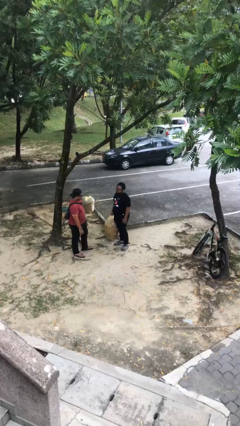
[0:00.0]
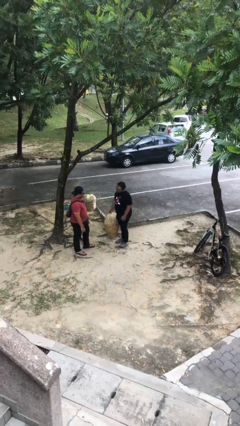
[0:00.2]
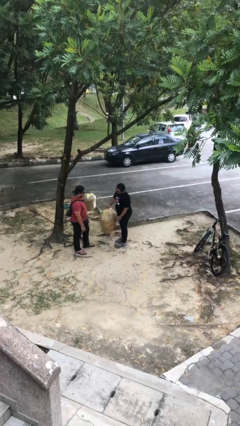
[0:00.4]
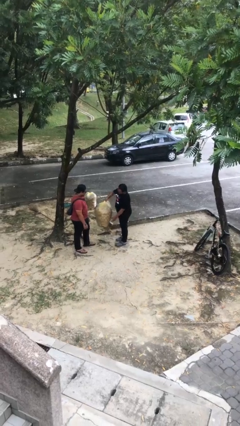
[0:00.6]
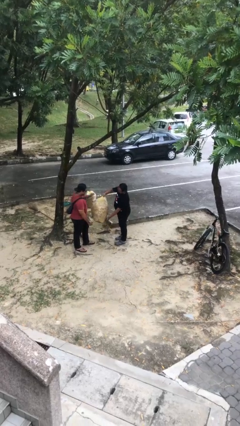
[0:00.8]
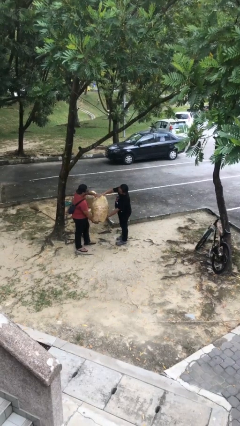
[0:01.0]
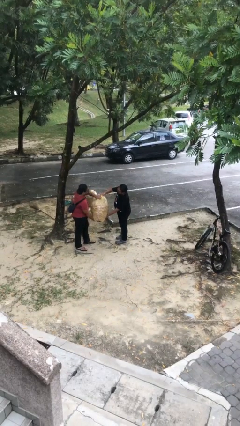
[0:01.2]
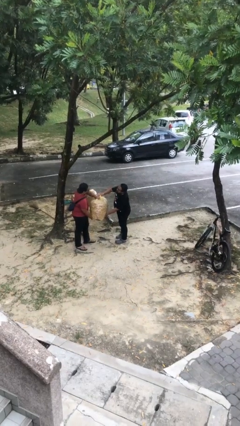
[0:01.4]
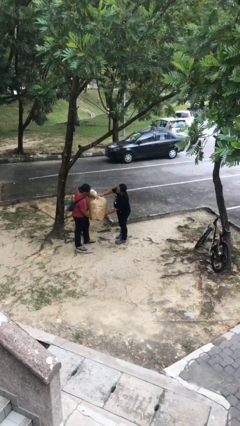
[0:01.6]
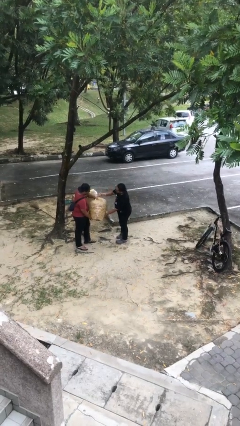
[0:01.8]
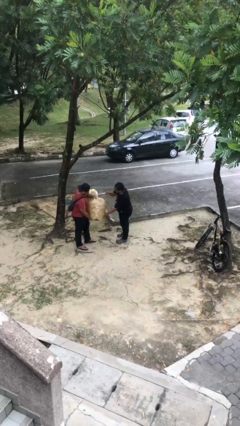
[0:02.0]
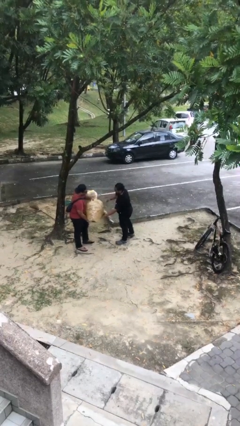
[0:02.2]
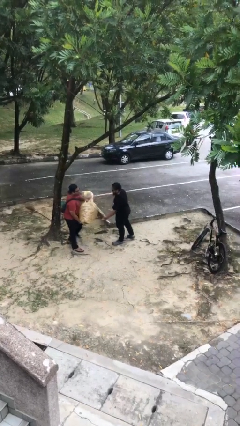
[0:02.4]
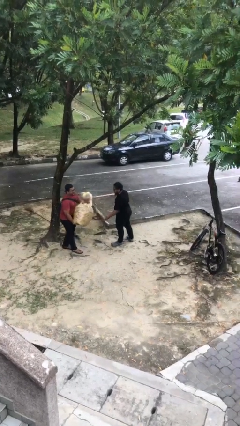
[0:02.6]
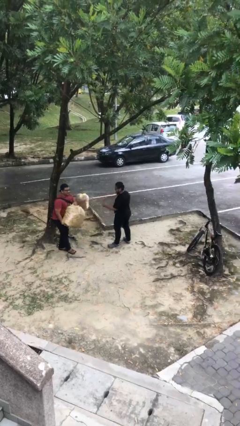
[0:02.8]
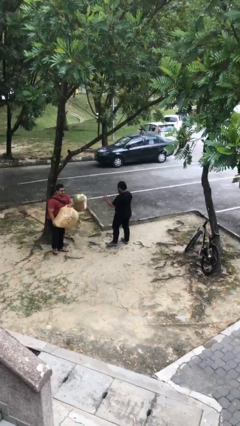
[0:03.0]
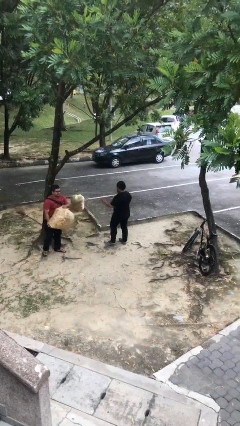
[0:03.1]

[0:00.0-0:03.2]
person transfers object to person

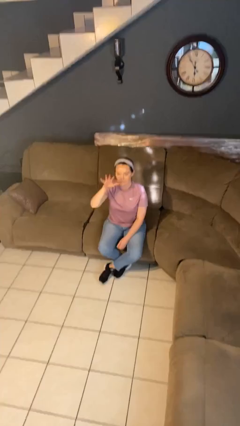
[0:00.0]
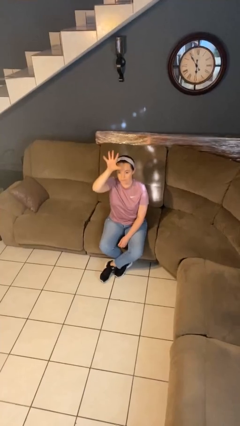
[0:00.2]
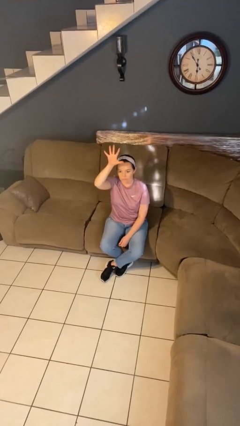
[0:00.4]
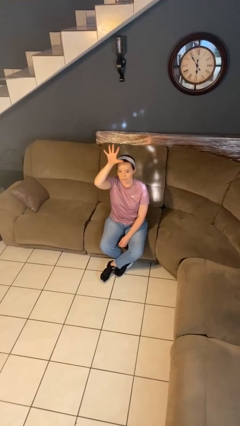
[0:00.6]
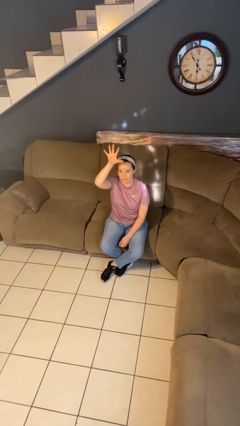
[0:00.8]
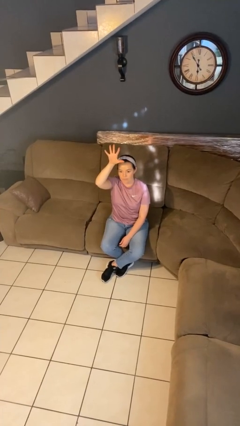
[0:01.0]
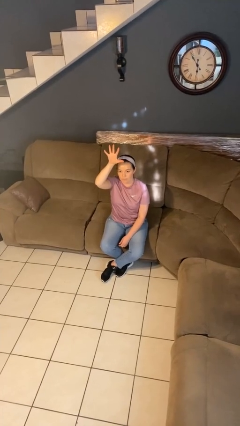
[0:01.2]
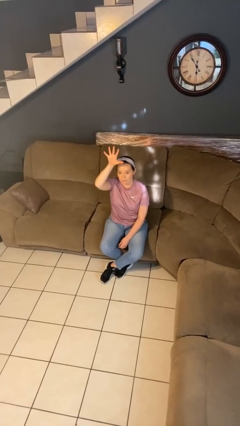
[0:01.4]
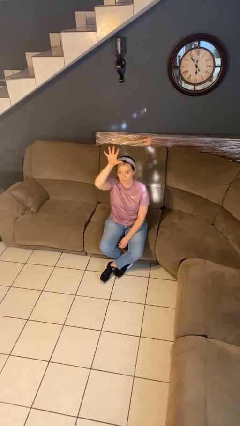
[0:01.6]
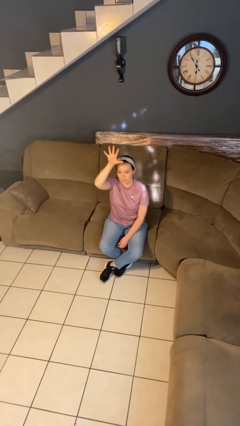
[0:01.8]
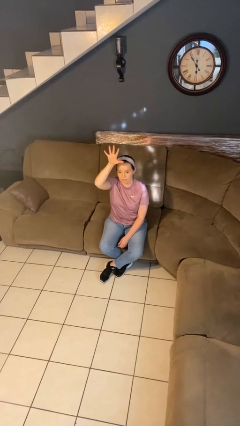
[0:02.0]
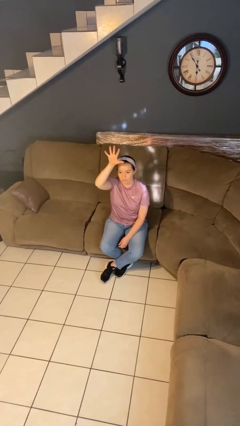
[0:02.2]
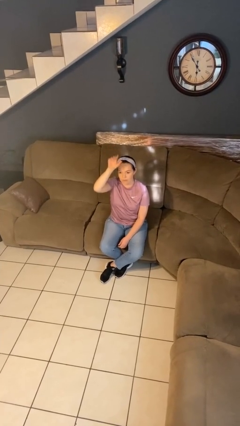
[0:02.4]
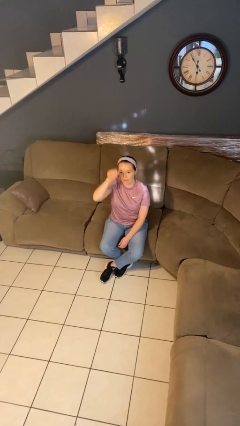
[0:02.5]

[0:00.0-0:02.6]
person gestures number five

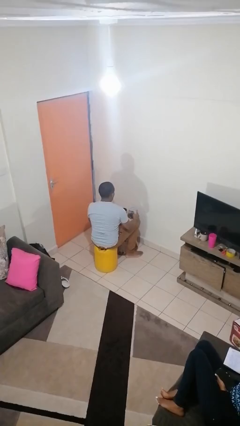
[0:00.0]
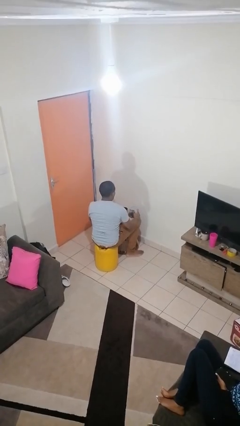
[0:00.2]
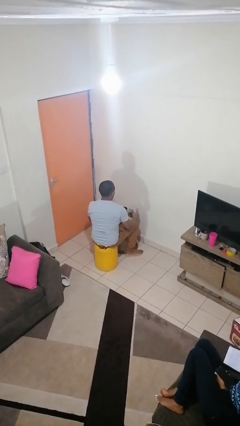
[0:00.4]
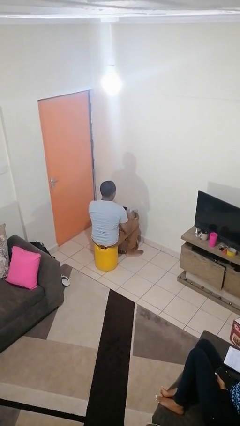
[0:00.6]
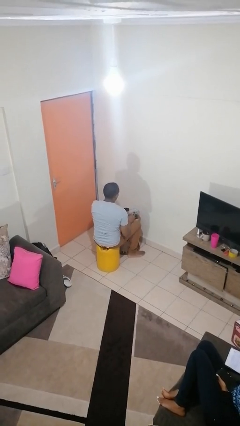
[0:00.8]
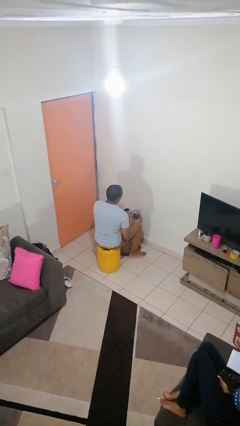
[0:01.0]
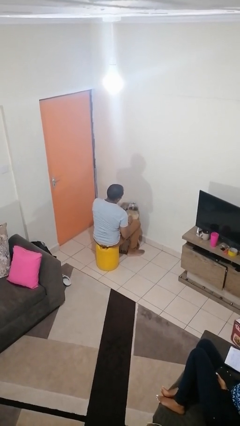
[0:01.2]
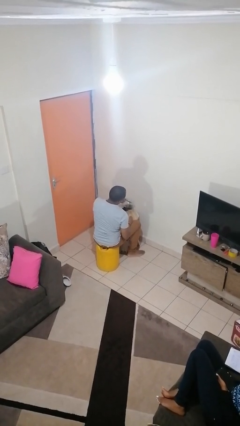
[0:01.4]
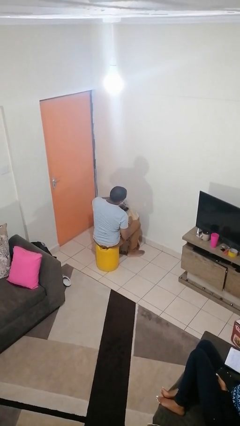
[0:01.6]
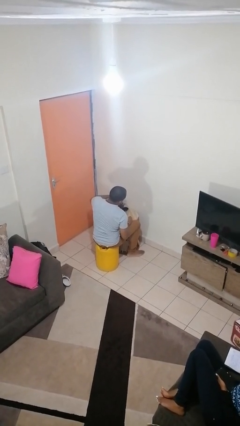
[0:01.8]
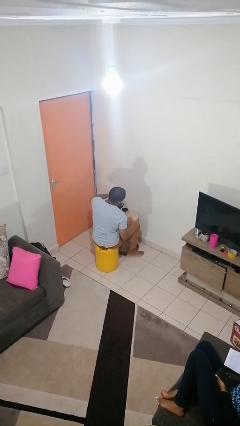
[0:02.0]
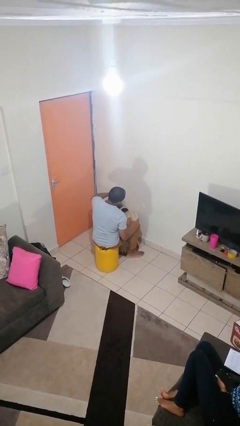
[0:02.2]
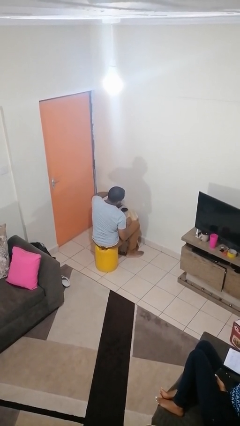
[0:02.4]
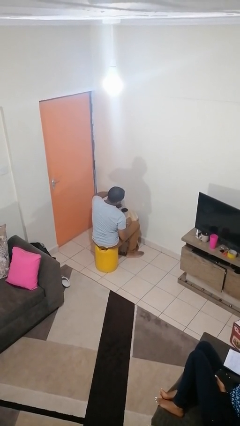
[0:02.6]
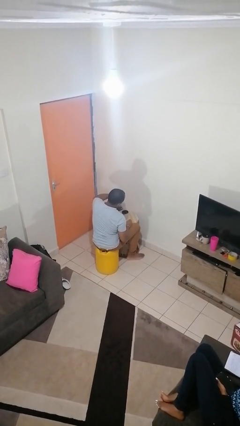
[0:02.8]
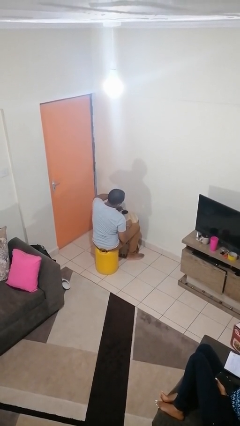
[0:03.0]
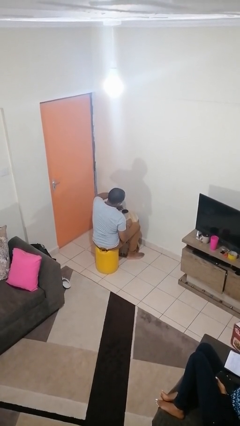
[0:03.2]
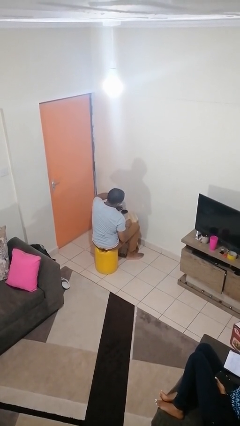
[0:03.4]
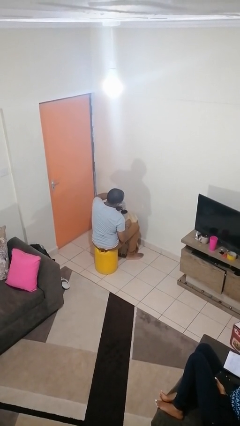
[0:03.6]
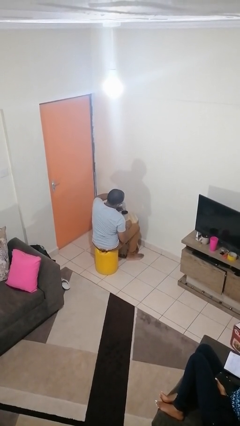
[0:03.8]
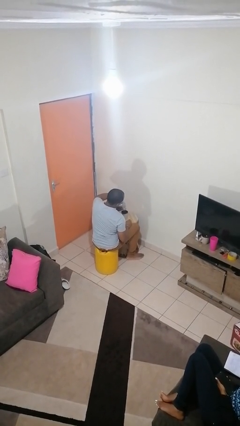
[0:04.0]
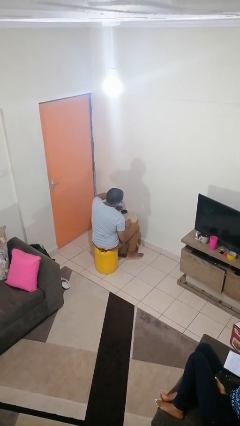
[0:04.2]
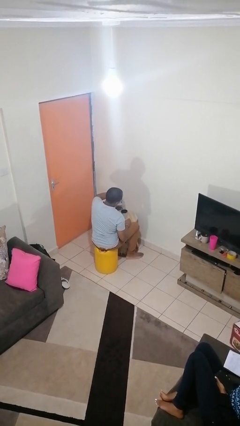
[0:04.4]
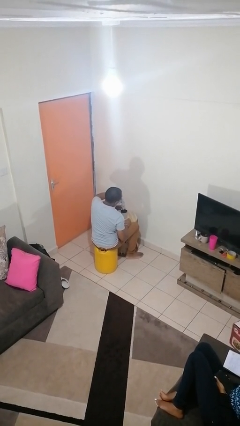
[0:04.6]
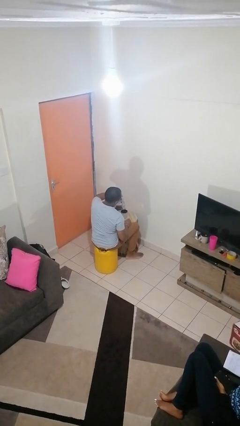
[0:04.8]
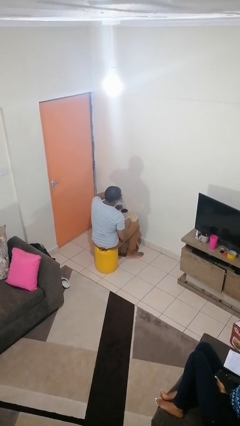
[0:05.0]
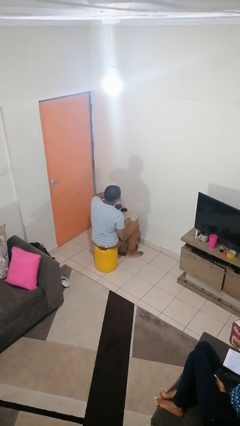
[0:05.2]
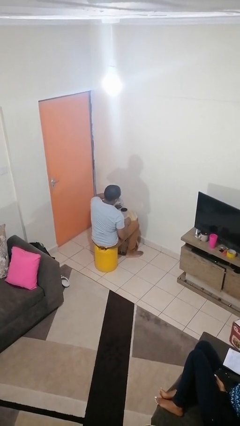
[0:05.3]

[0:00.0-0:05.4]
person pours coffee into mug

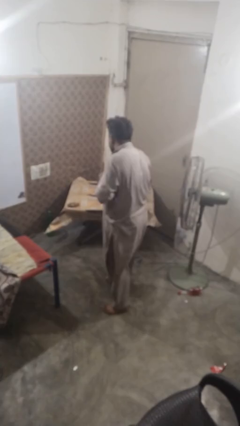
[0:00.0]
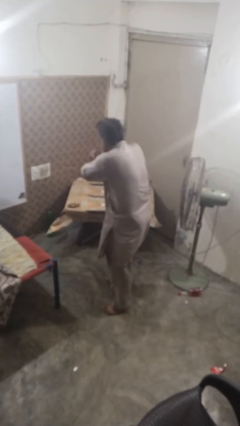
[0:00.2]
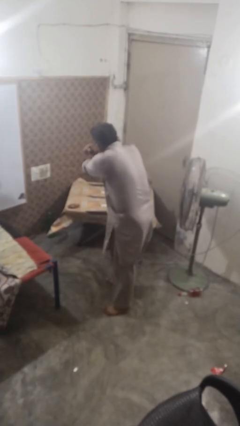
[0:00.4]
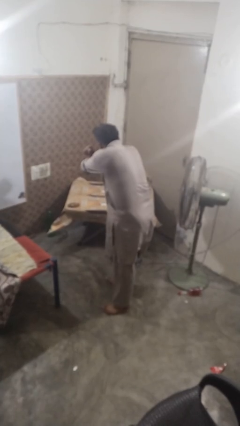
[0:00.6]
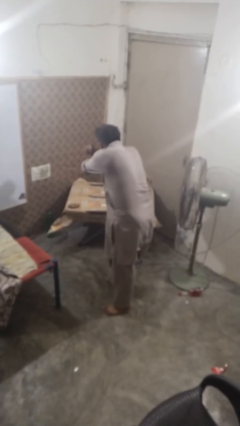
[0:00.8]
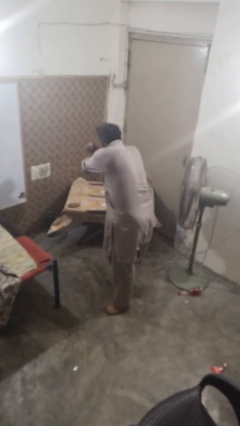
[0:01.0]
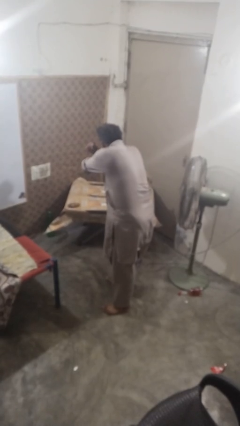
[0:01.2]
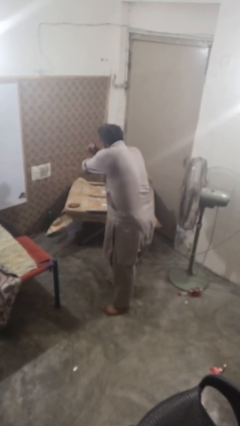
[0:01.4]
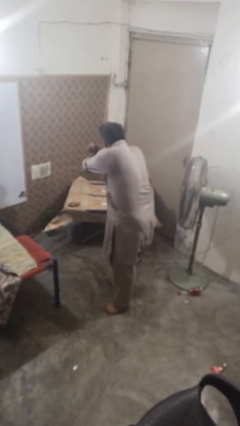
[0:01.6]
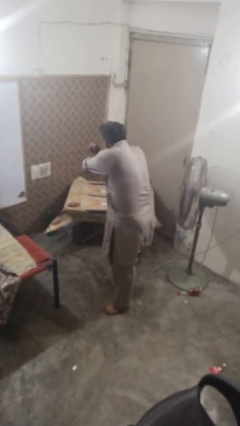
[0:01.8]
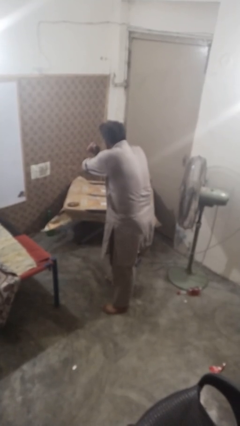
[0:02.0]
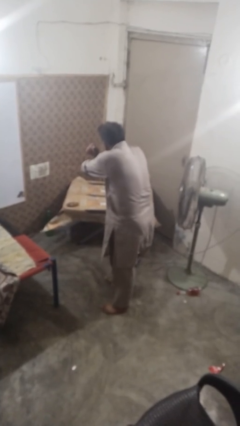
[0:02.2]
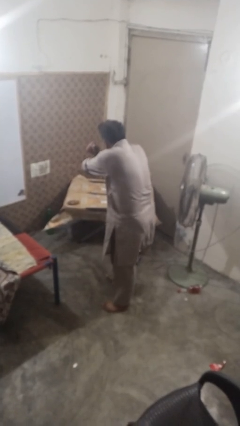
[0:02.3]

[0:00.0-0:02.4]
person karate chop

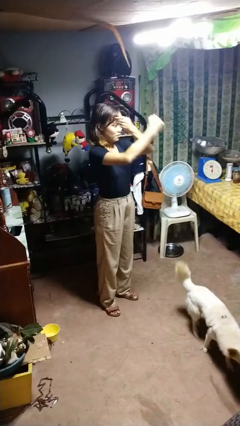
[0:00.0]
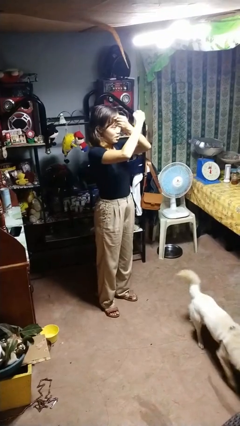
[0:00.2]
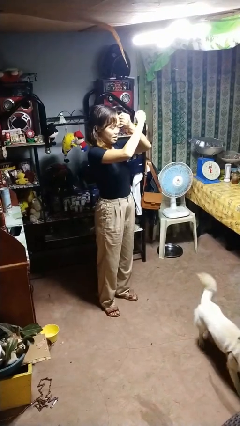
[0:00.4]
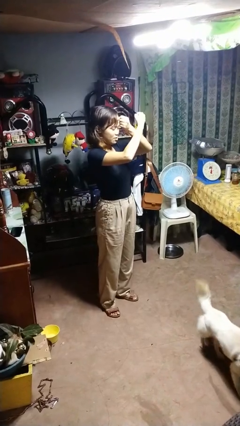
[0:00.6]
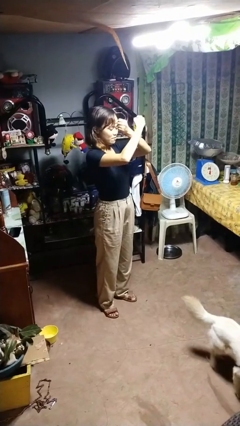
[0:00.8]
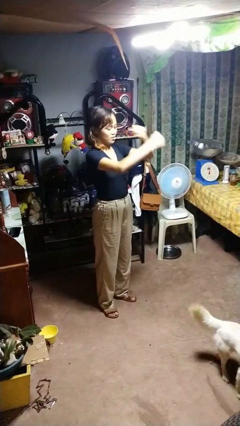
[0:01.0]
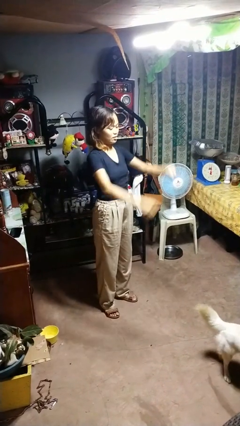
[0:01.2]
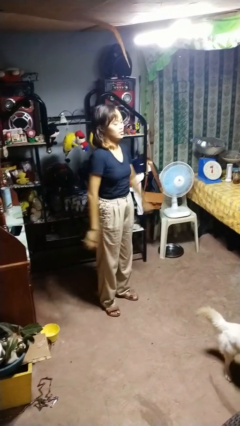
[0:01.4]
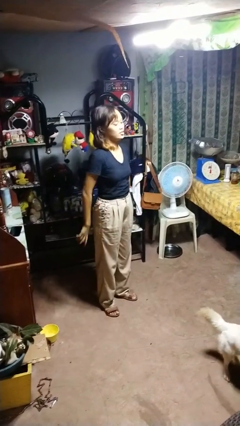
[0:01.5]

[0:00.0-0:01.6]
person gestures arms x

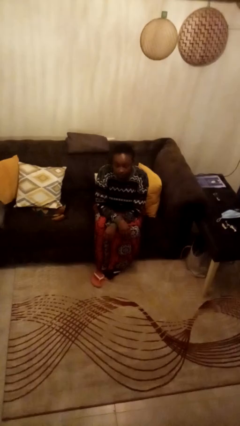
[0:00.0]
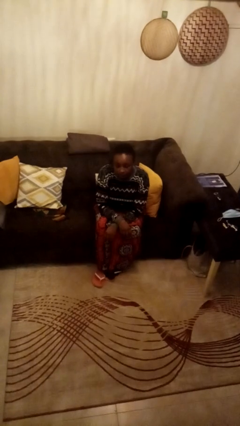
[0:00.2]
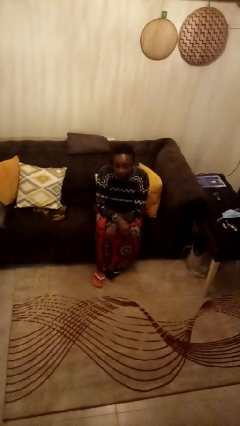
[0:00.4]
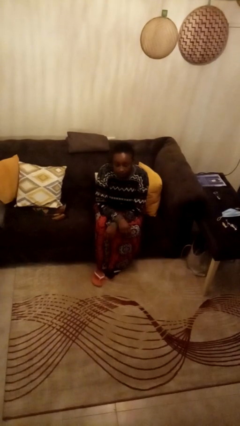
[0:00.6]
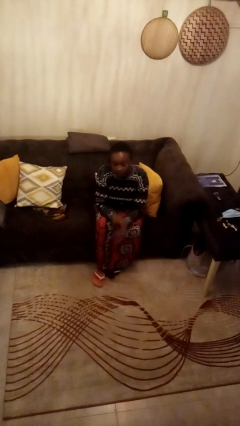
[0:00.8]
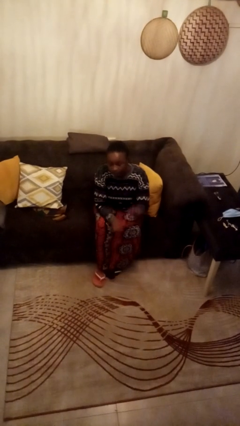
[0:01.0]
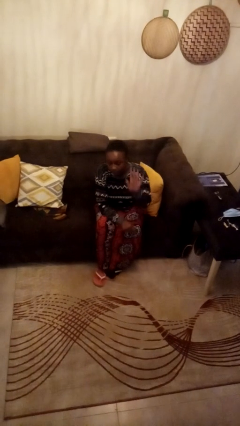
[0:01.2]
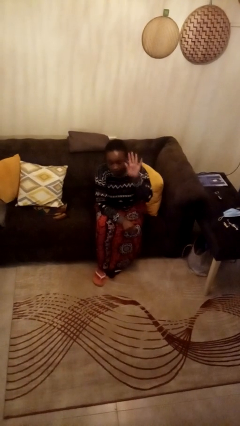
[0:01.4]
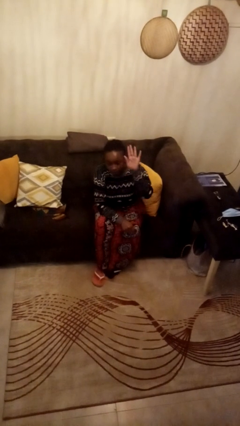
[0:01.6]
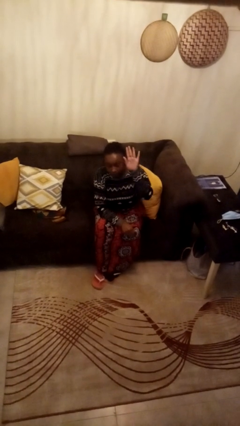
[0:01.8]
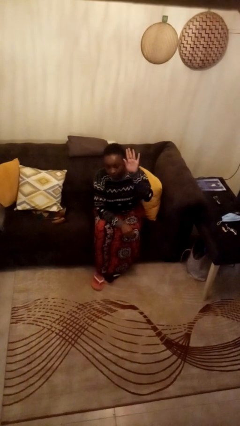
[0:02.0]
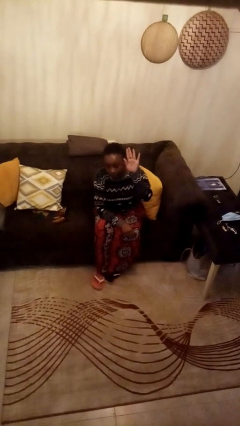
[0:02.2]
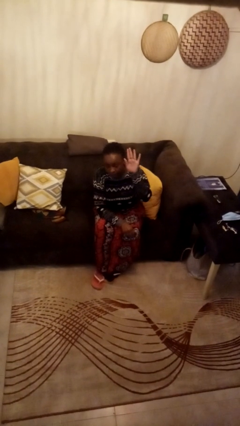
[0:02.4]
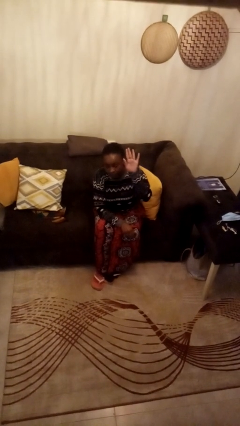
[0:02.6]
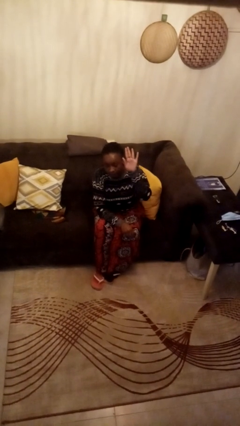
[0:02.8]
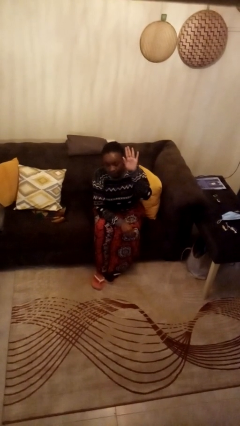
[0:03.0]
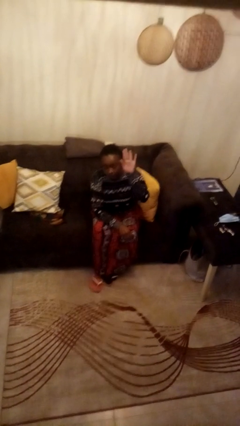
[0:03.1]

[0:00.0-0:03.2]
person gestures raise hand
